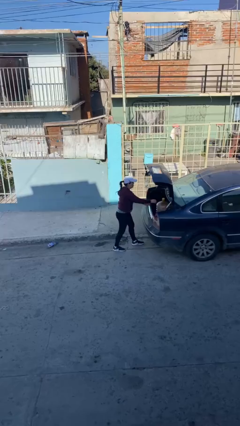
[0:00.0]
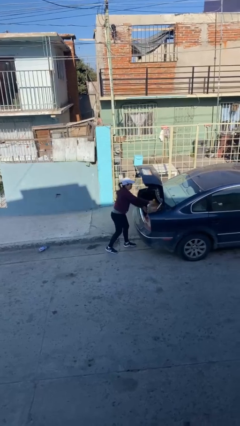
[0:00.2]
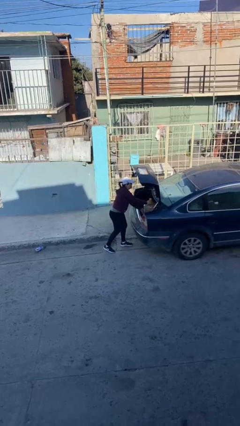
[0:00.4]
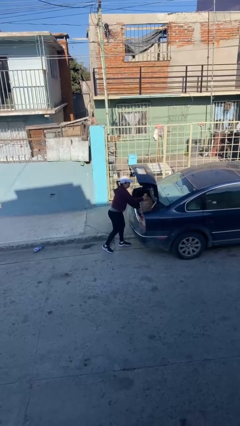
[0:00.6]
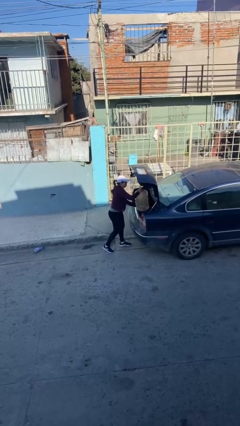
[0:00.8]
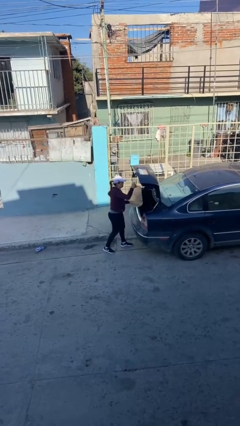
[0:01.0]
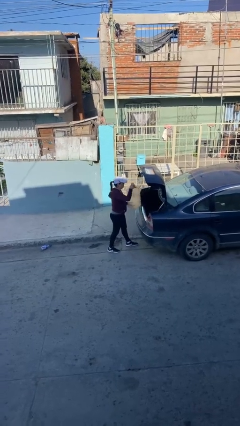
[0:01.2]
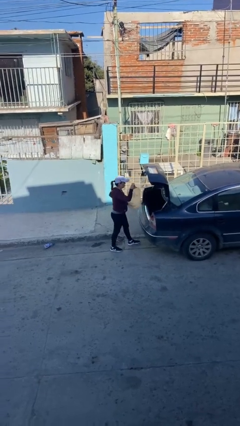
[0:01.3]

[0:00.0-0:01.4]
person unloads car

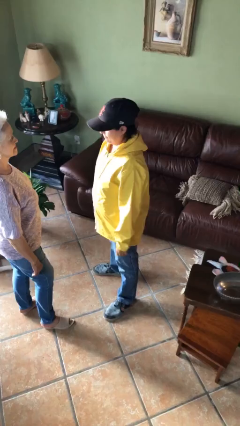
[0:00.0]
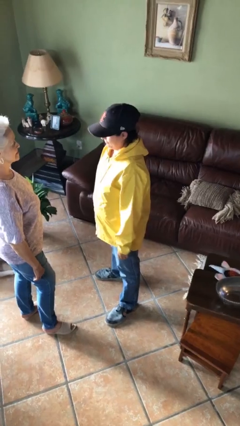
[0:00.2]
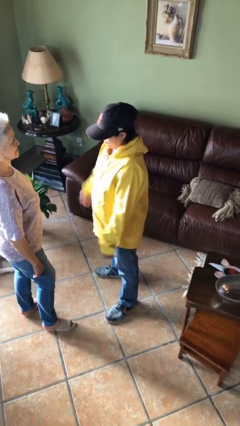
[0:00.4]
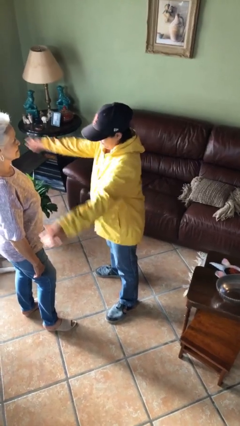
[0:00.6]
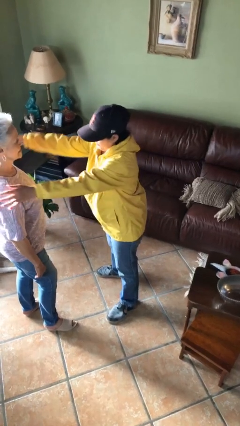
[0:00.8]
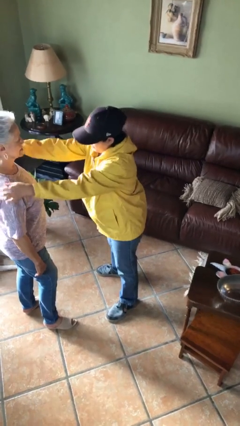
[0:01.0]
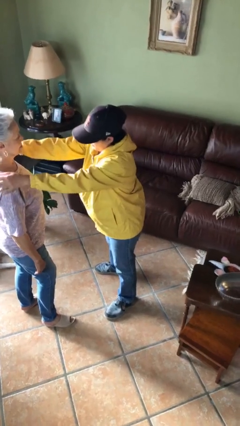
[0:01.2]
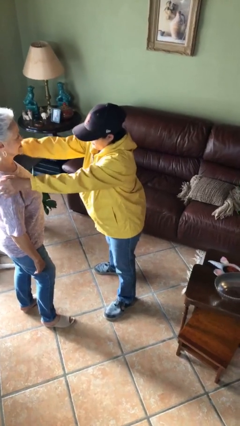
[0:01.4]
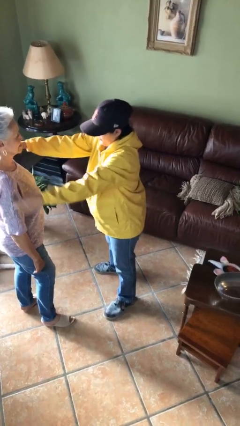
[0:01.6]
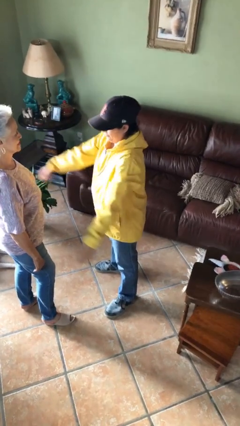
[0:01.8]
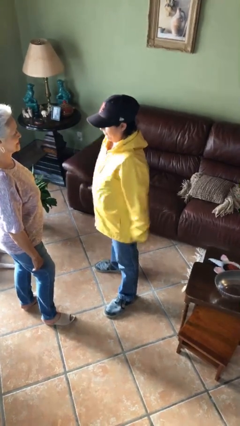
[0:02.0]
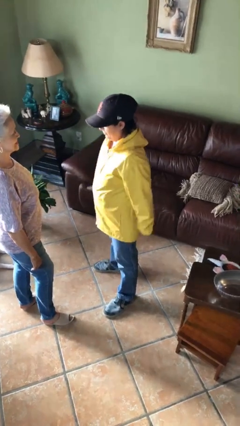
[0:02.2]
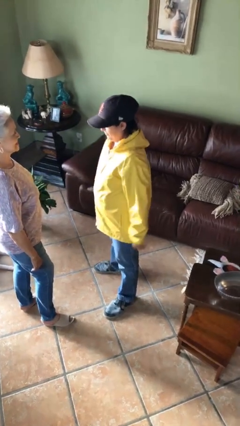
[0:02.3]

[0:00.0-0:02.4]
person pounds shoulders of person

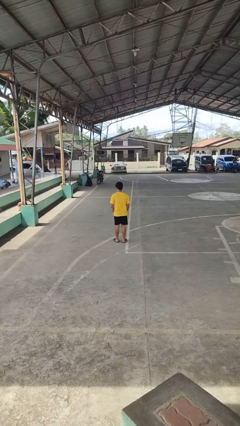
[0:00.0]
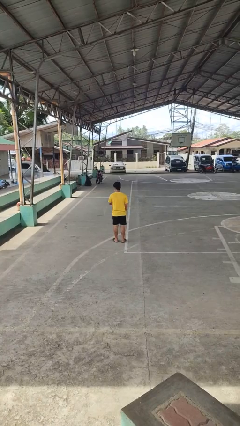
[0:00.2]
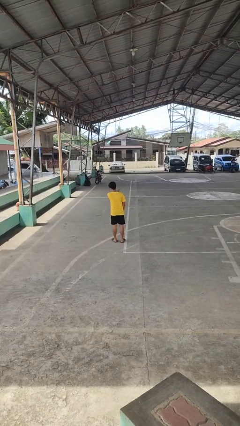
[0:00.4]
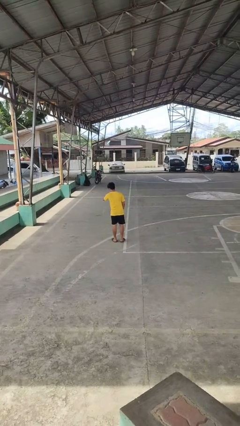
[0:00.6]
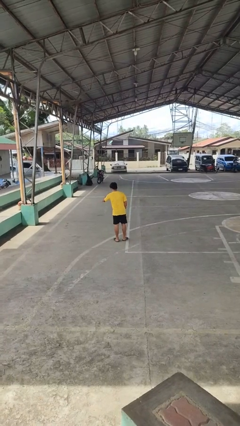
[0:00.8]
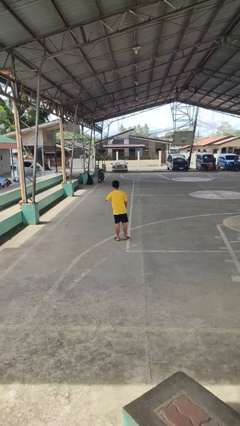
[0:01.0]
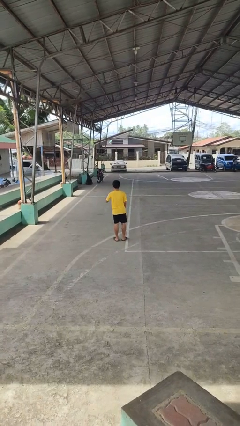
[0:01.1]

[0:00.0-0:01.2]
person karate chop

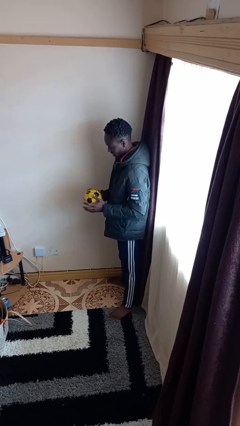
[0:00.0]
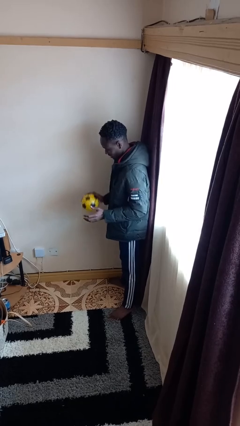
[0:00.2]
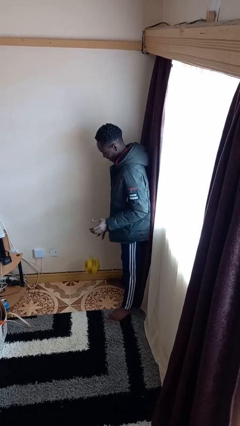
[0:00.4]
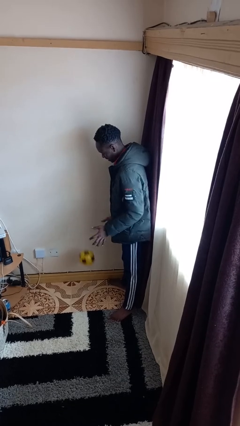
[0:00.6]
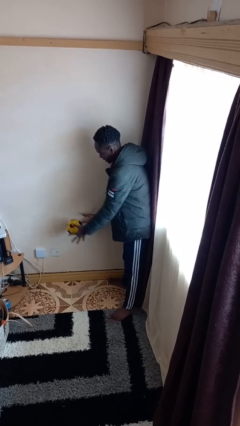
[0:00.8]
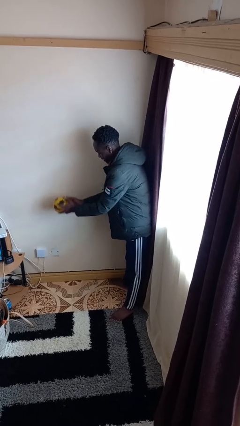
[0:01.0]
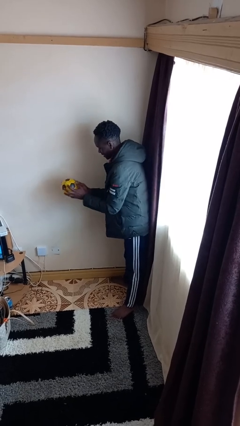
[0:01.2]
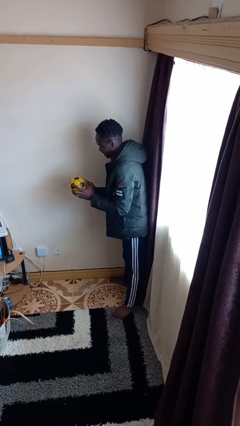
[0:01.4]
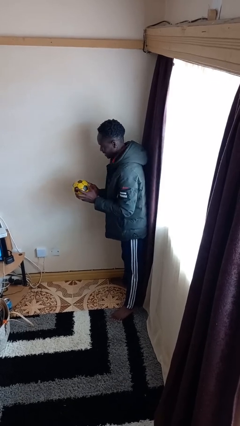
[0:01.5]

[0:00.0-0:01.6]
person bounces ball on floor

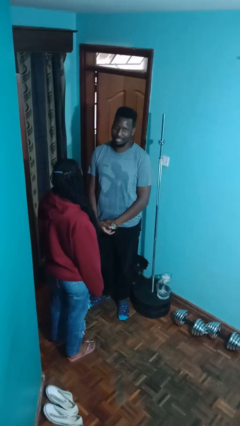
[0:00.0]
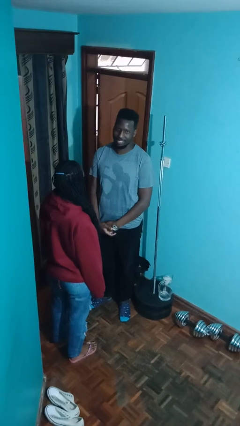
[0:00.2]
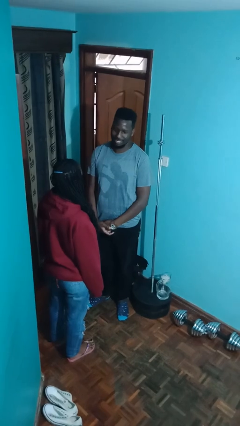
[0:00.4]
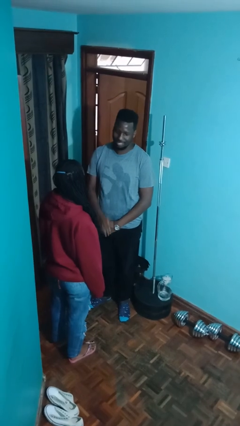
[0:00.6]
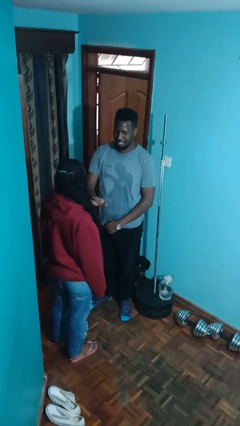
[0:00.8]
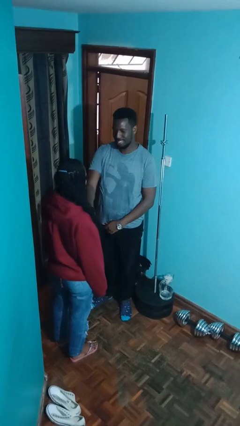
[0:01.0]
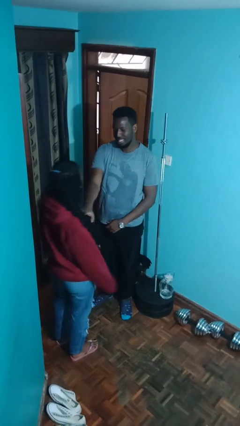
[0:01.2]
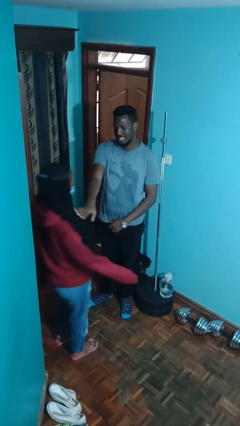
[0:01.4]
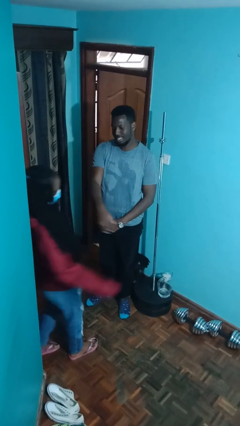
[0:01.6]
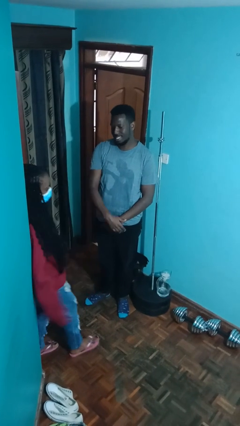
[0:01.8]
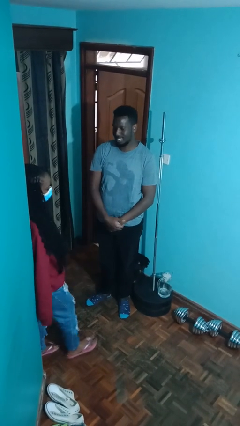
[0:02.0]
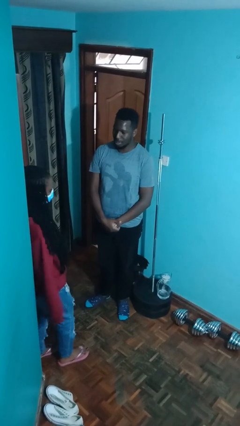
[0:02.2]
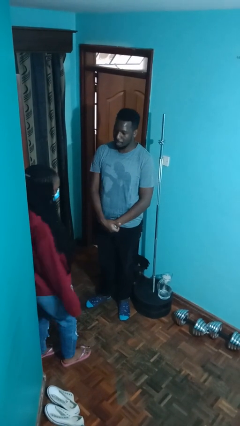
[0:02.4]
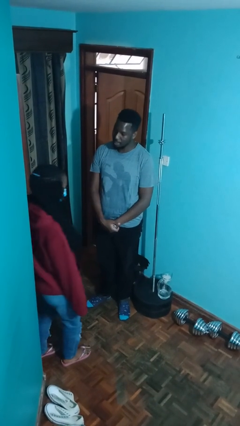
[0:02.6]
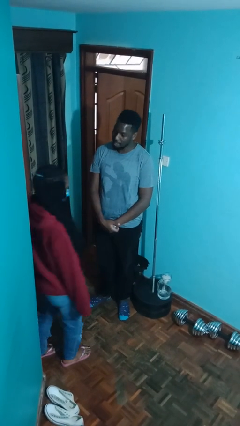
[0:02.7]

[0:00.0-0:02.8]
person shoves person

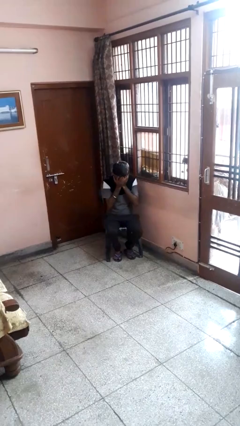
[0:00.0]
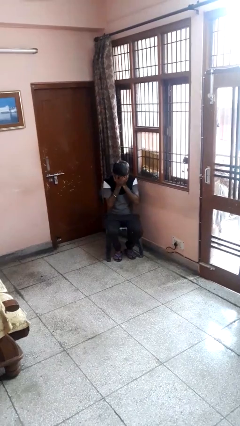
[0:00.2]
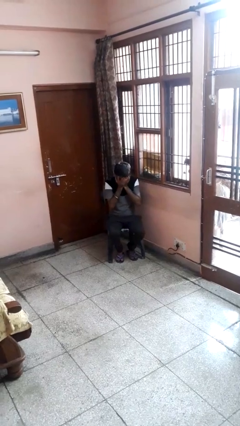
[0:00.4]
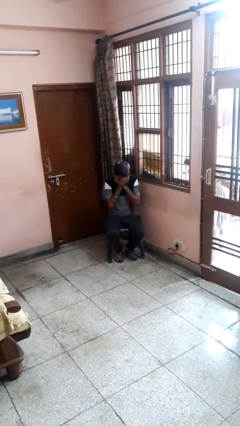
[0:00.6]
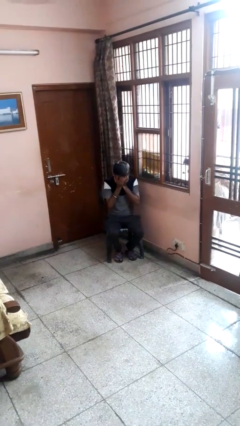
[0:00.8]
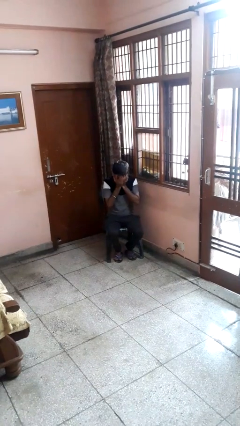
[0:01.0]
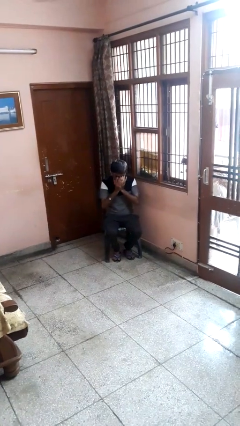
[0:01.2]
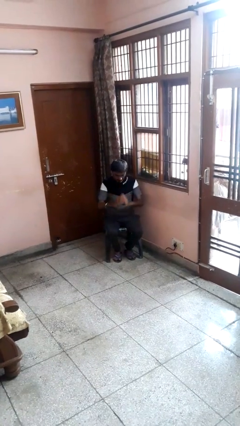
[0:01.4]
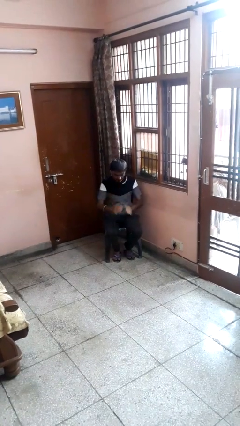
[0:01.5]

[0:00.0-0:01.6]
person covers face with hands

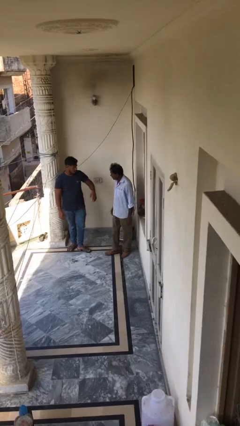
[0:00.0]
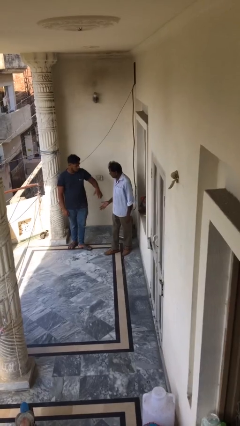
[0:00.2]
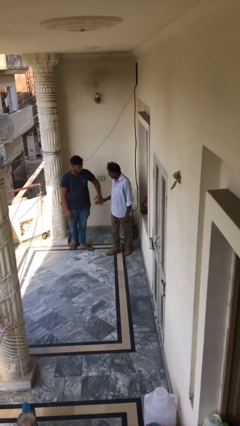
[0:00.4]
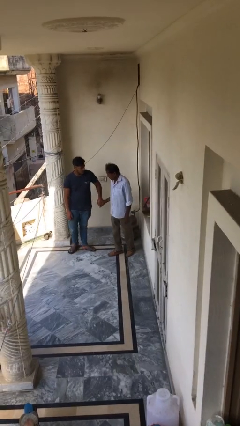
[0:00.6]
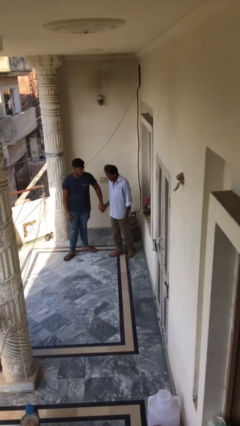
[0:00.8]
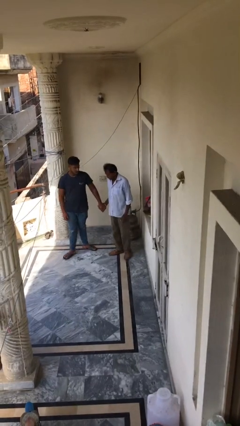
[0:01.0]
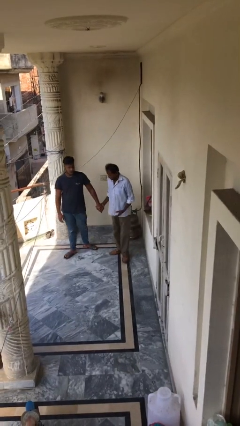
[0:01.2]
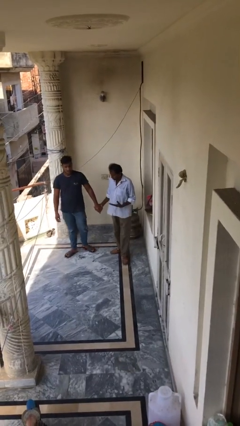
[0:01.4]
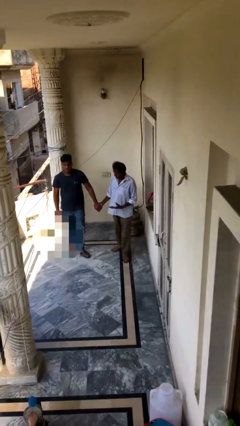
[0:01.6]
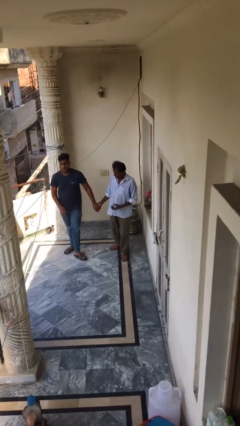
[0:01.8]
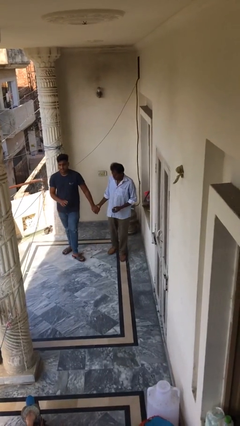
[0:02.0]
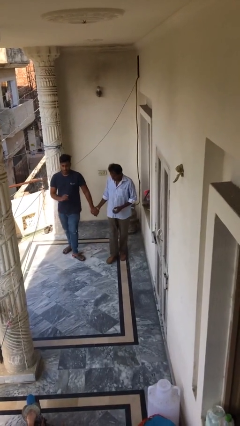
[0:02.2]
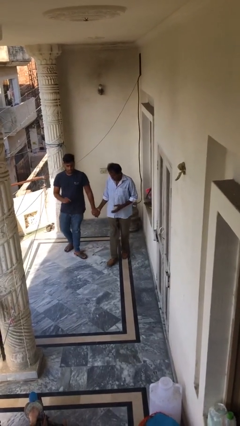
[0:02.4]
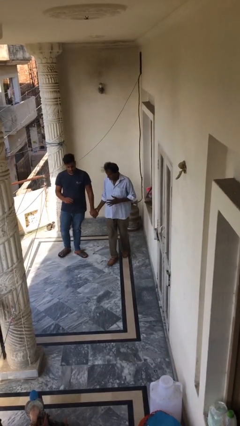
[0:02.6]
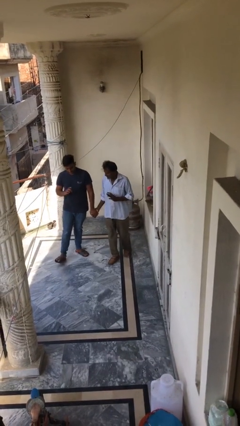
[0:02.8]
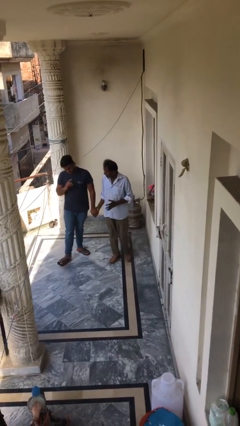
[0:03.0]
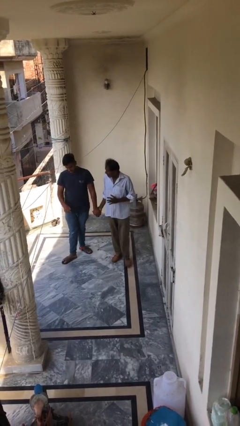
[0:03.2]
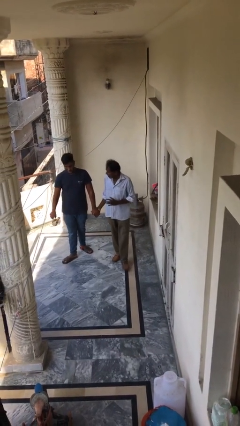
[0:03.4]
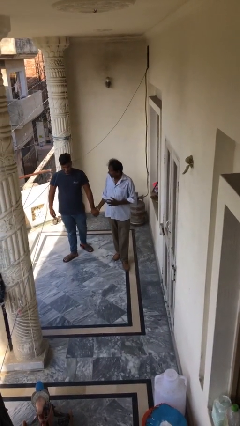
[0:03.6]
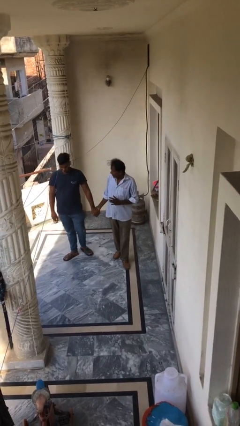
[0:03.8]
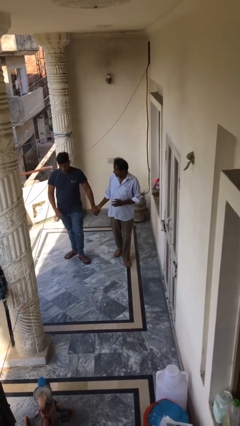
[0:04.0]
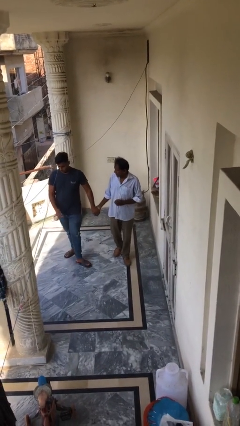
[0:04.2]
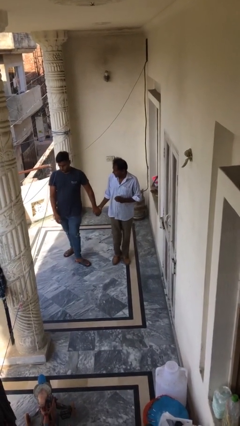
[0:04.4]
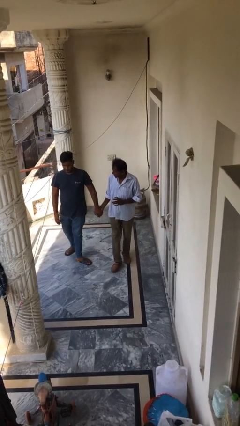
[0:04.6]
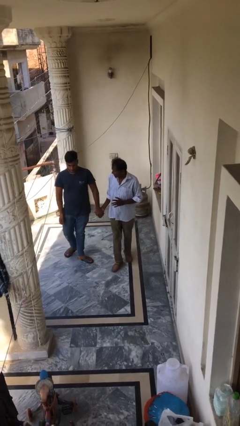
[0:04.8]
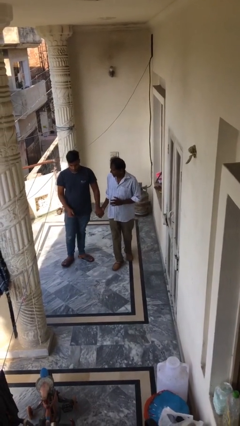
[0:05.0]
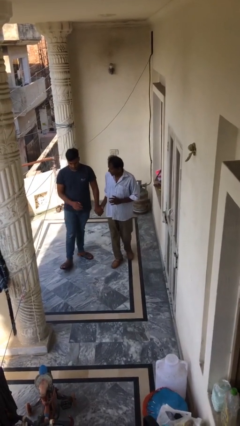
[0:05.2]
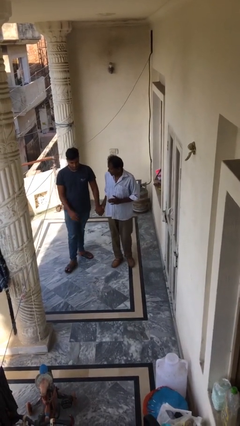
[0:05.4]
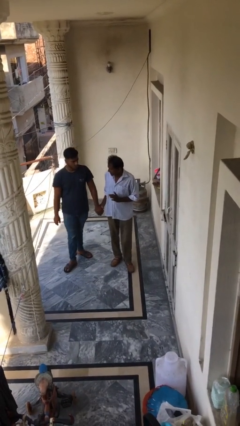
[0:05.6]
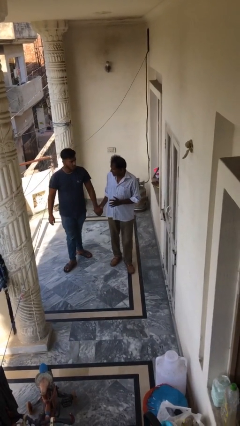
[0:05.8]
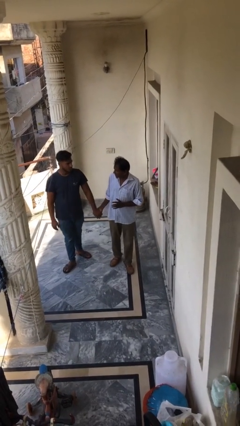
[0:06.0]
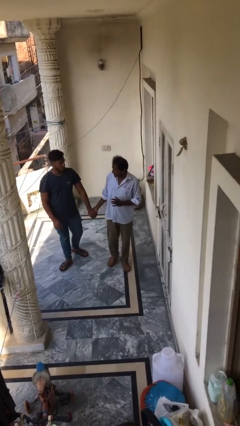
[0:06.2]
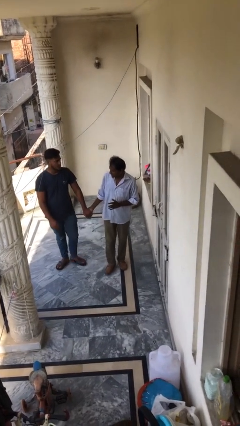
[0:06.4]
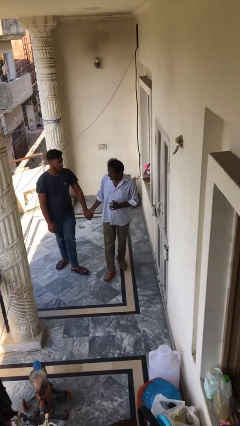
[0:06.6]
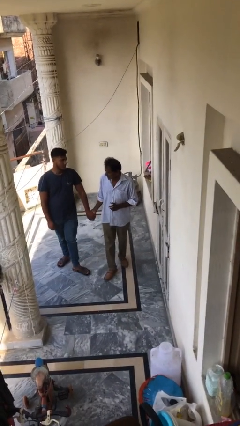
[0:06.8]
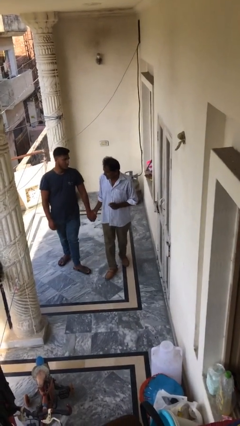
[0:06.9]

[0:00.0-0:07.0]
person holds hand
